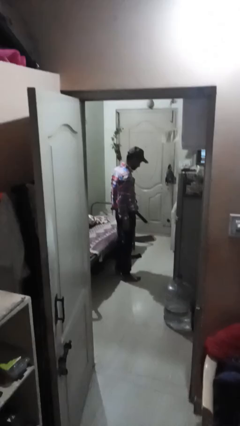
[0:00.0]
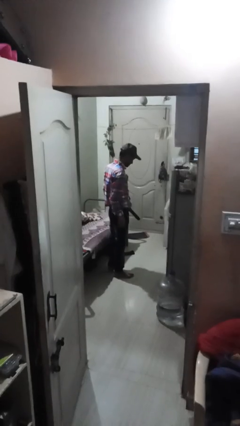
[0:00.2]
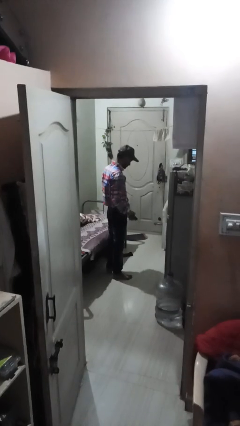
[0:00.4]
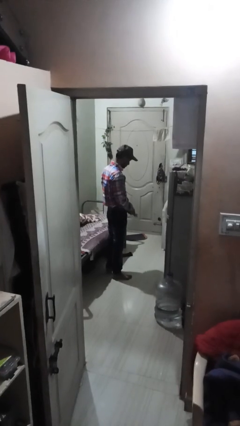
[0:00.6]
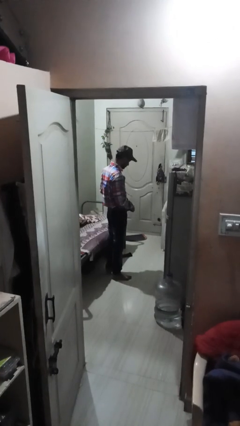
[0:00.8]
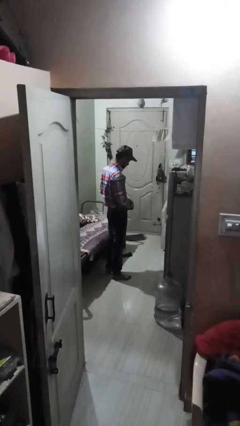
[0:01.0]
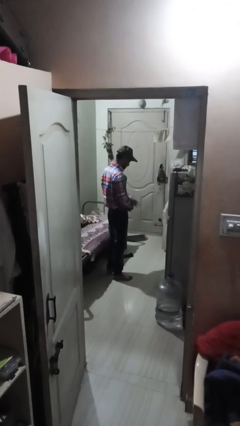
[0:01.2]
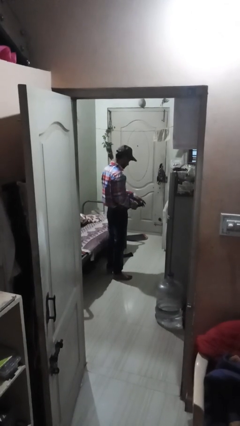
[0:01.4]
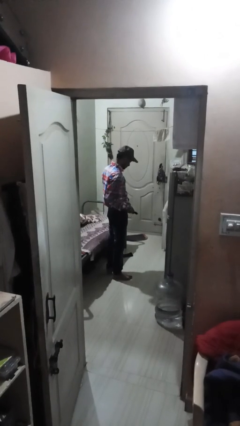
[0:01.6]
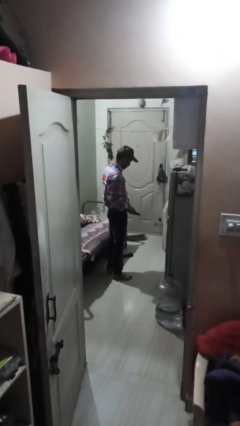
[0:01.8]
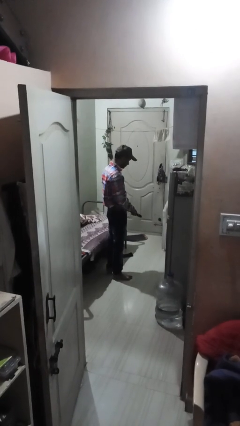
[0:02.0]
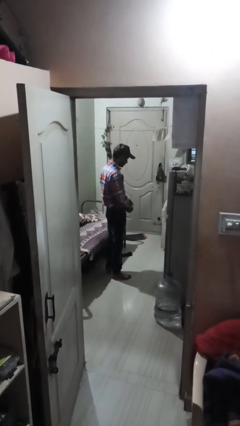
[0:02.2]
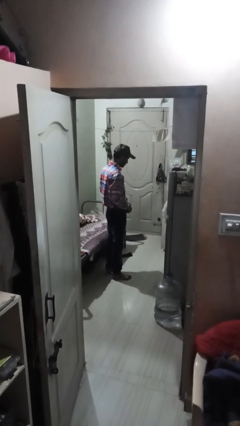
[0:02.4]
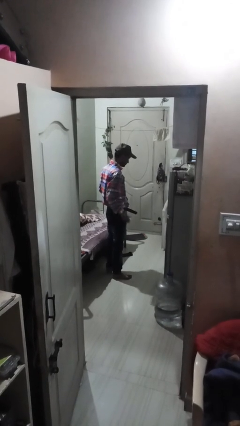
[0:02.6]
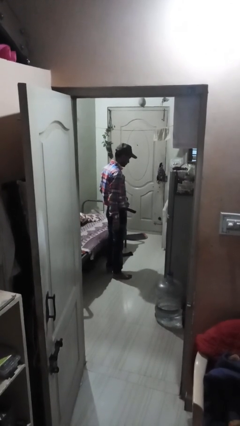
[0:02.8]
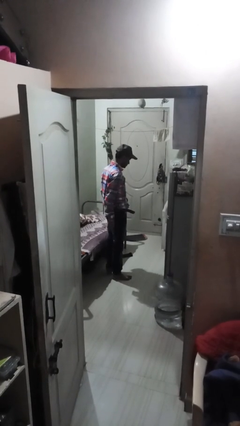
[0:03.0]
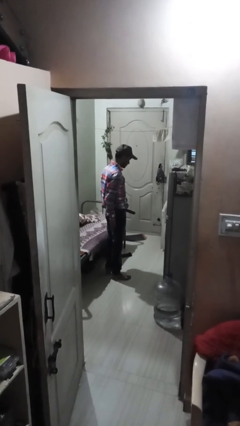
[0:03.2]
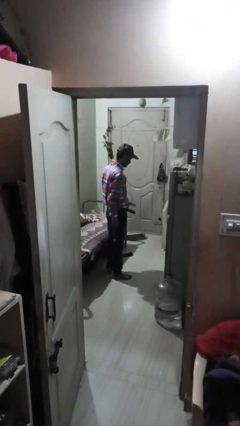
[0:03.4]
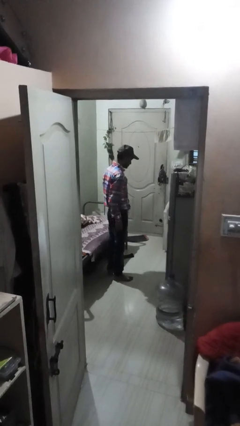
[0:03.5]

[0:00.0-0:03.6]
person puts on belt

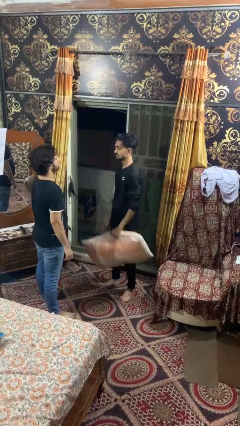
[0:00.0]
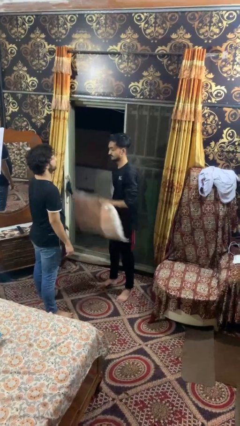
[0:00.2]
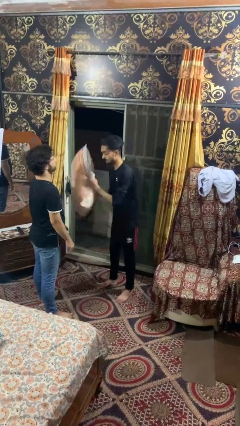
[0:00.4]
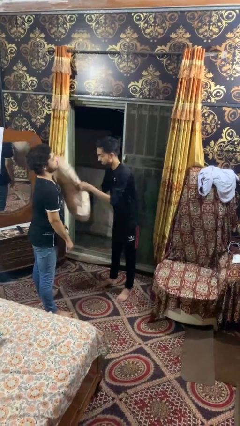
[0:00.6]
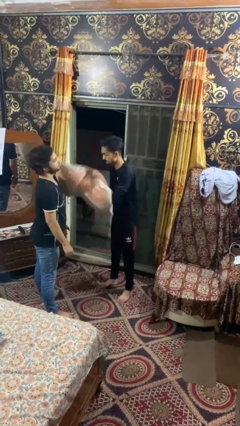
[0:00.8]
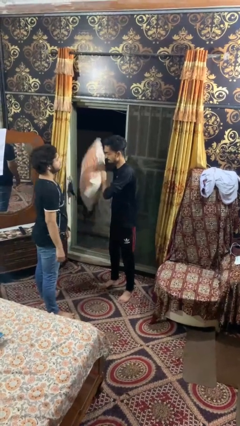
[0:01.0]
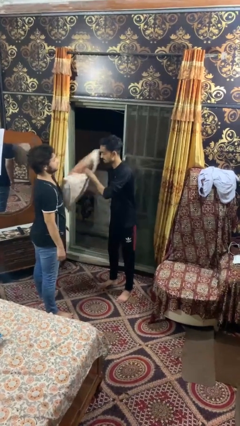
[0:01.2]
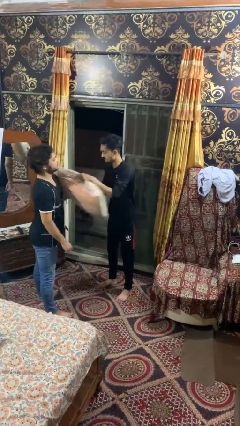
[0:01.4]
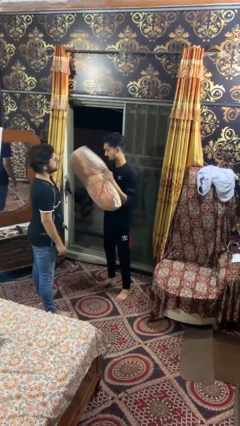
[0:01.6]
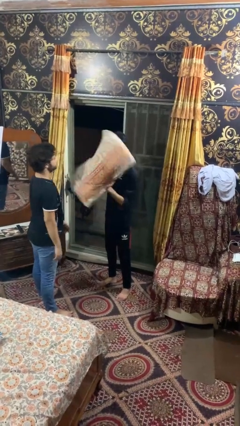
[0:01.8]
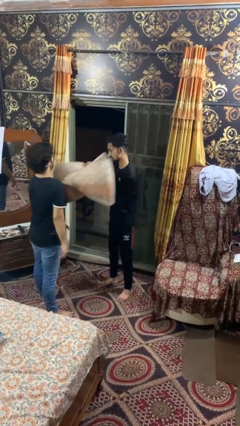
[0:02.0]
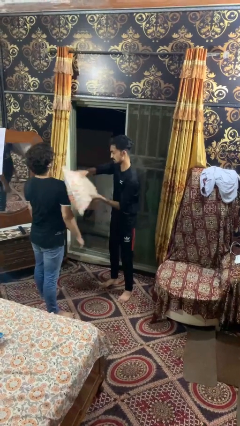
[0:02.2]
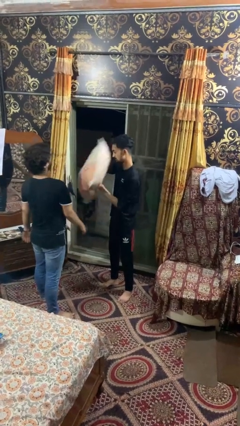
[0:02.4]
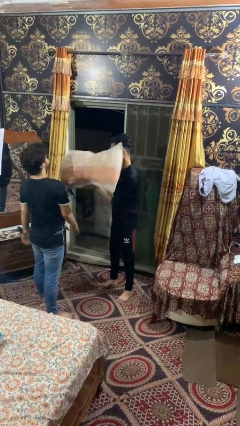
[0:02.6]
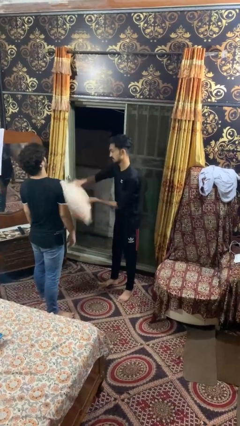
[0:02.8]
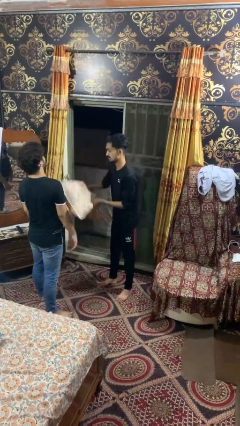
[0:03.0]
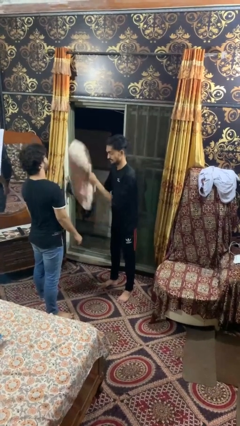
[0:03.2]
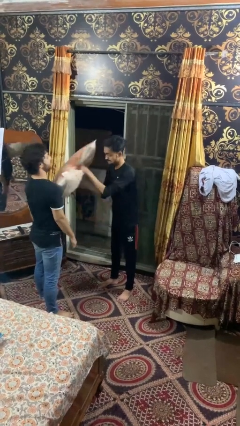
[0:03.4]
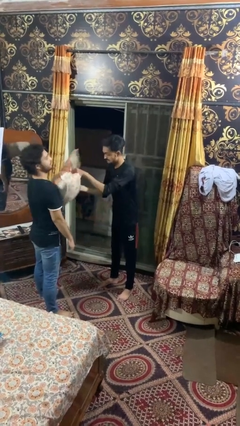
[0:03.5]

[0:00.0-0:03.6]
person hits person with pillow

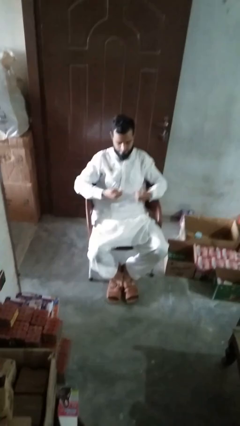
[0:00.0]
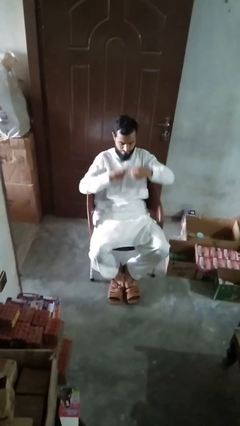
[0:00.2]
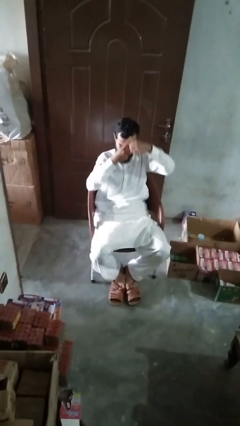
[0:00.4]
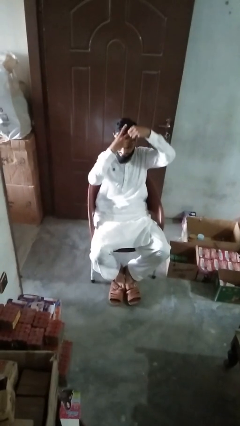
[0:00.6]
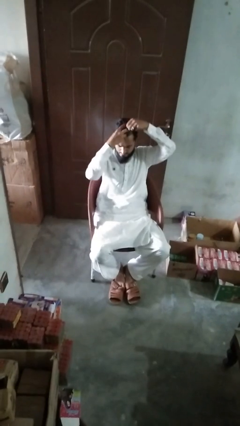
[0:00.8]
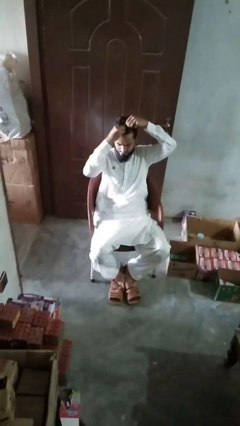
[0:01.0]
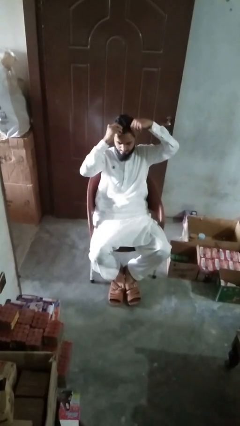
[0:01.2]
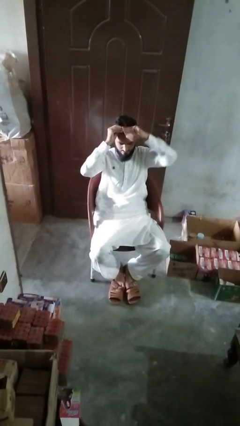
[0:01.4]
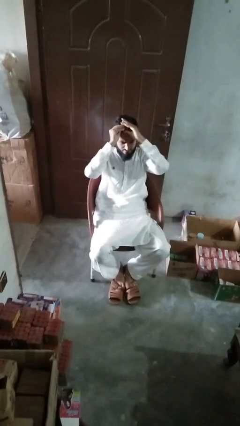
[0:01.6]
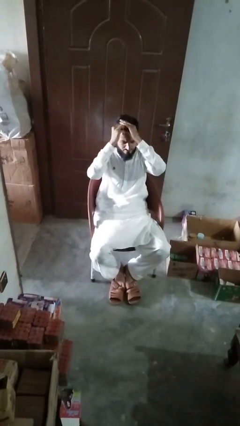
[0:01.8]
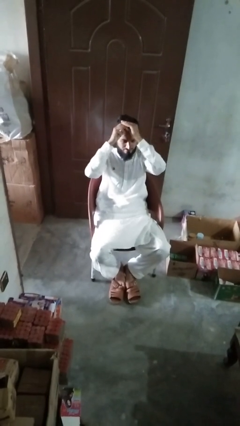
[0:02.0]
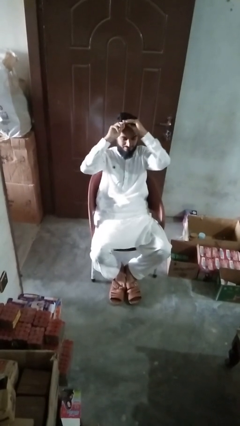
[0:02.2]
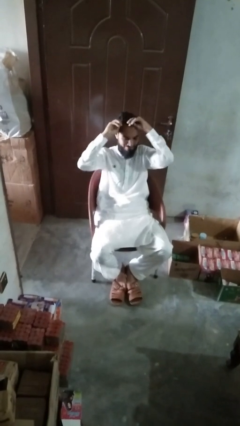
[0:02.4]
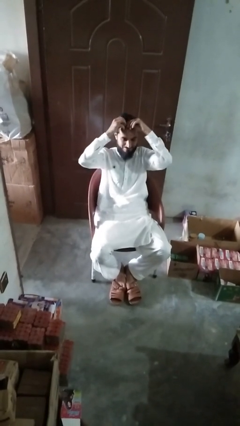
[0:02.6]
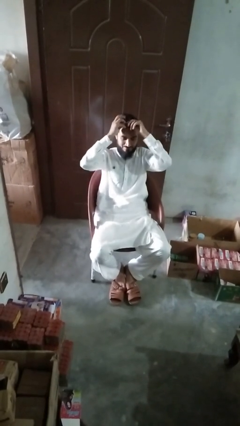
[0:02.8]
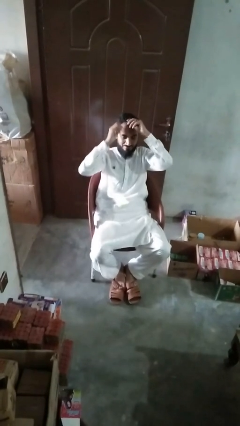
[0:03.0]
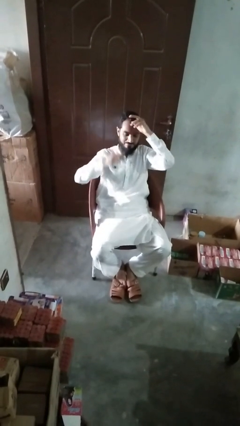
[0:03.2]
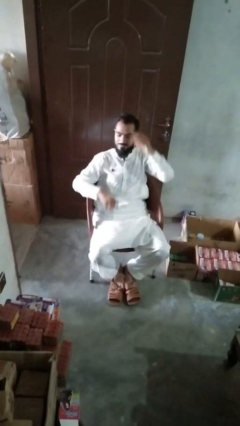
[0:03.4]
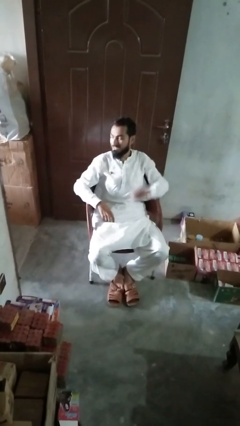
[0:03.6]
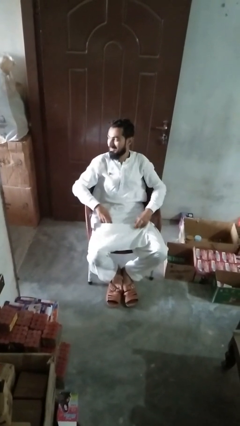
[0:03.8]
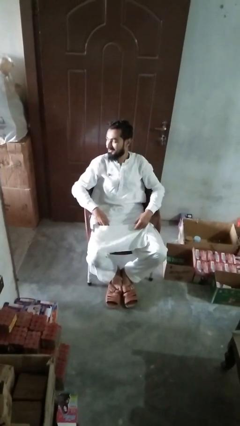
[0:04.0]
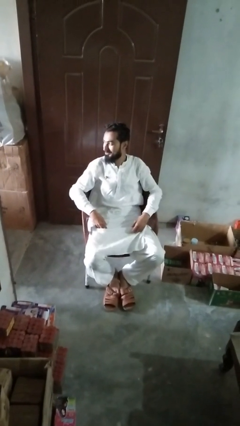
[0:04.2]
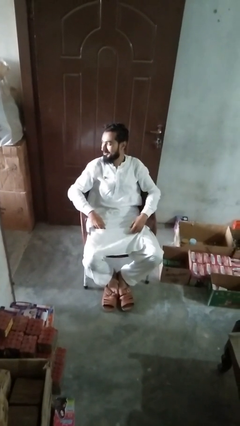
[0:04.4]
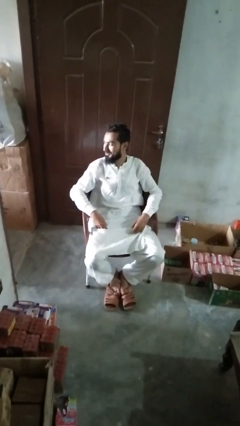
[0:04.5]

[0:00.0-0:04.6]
person puts hair in ponytail

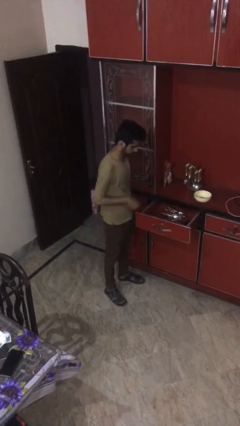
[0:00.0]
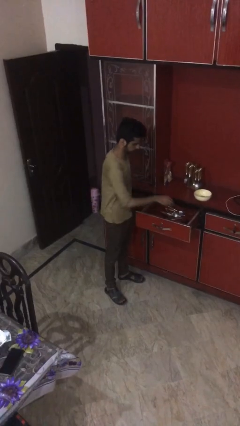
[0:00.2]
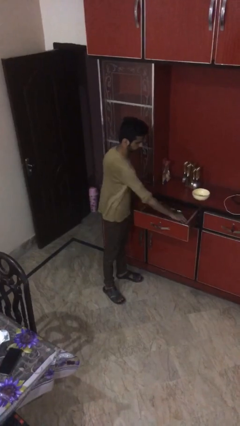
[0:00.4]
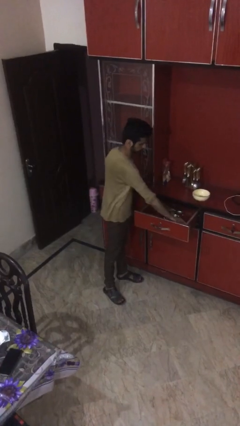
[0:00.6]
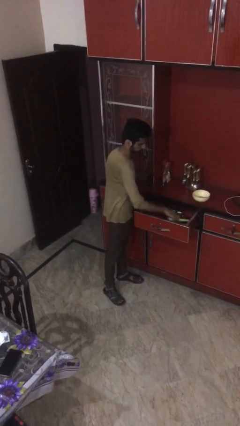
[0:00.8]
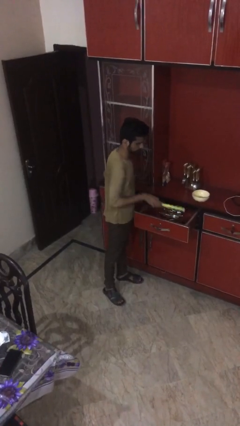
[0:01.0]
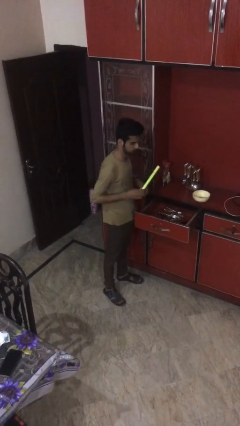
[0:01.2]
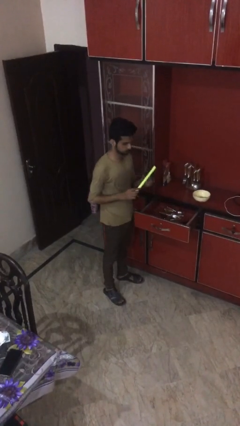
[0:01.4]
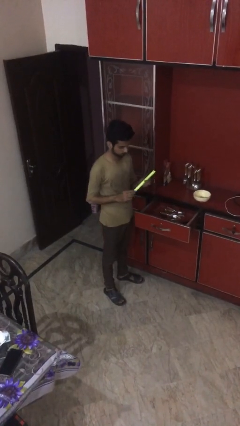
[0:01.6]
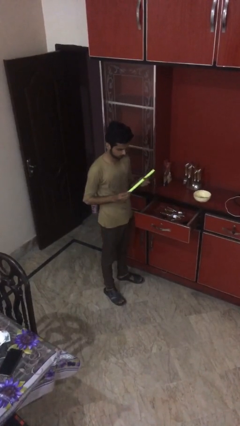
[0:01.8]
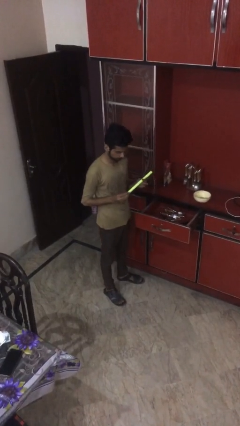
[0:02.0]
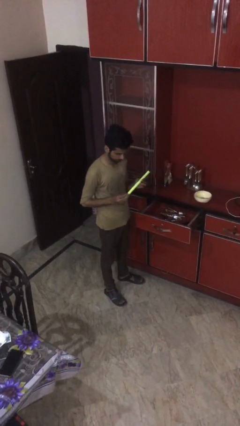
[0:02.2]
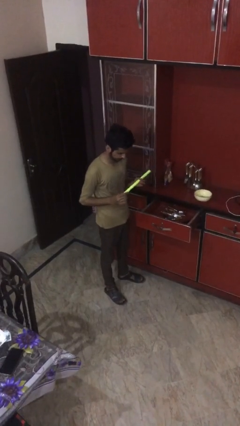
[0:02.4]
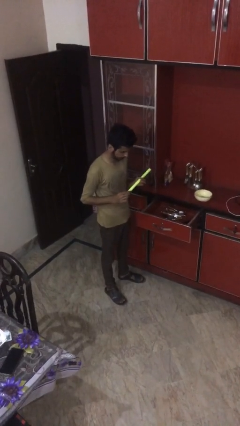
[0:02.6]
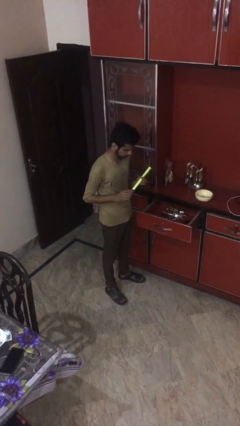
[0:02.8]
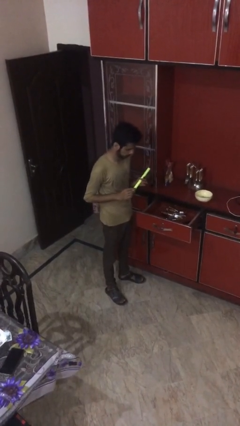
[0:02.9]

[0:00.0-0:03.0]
person takes object from kitchen drawer

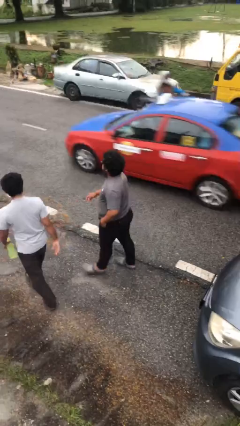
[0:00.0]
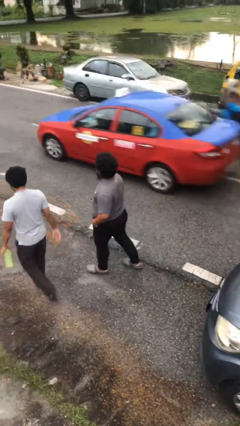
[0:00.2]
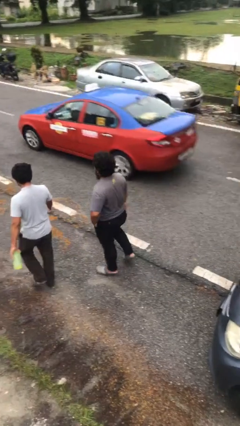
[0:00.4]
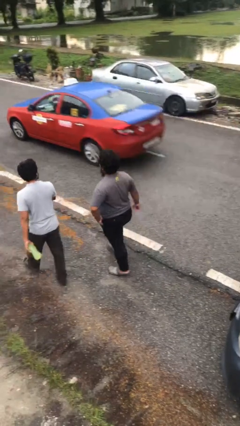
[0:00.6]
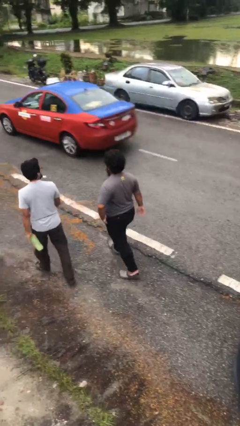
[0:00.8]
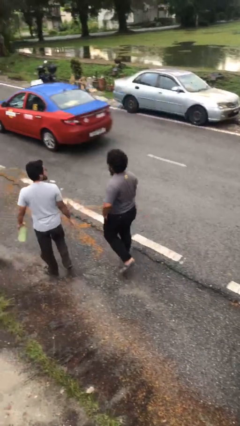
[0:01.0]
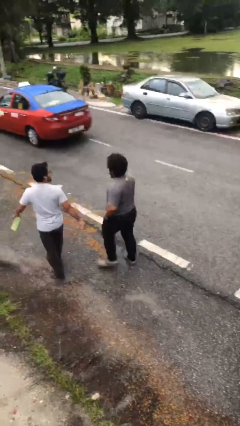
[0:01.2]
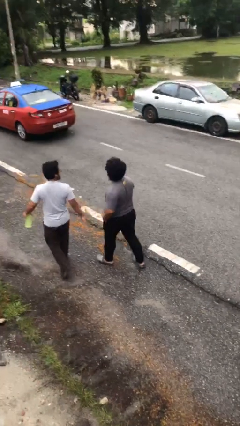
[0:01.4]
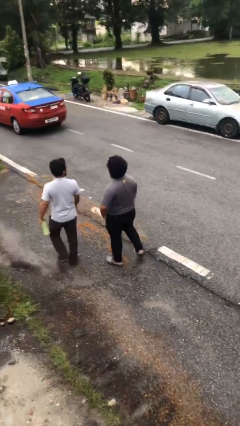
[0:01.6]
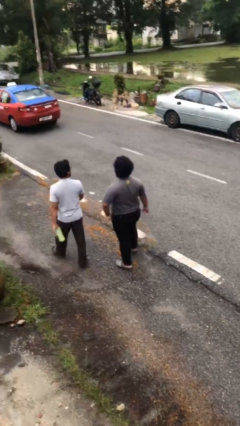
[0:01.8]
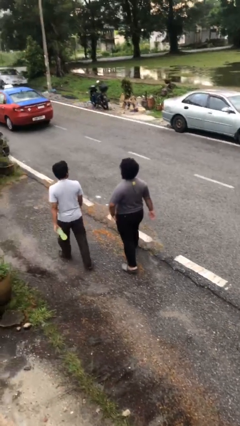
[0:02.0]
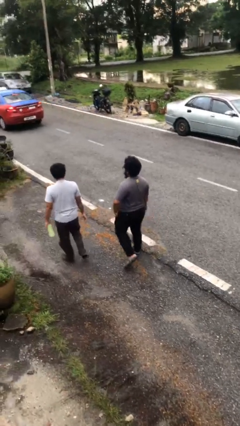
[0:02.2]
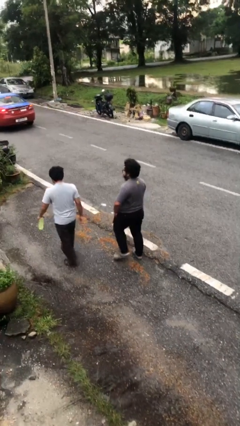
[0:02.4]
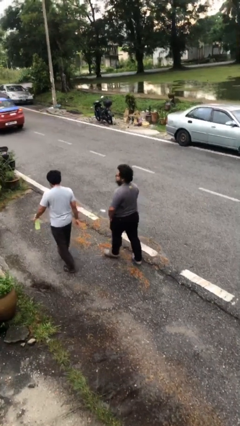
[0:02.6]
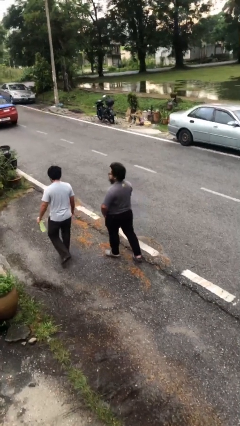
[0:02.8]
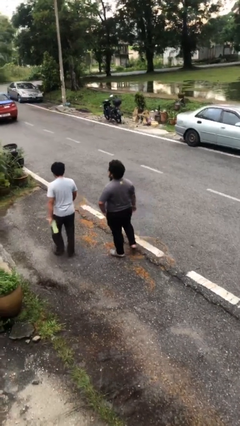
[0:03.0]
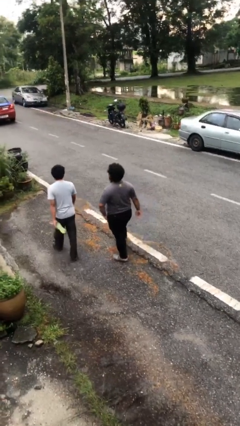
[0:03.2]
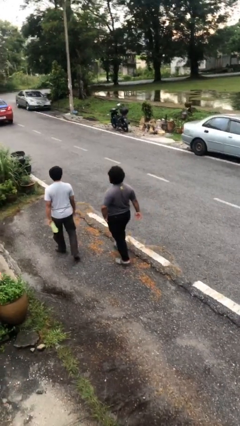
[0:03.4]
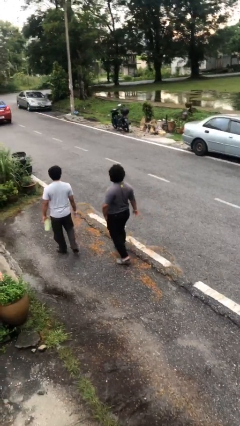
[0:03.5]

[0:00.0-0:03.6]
person talks to person
